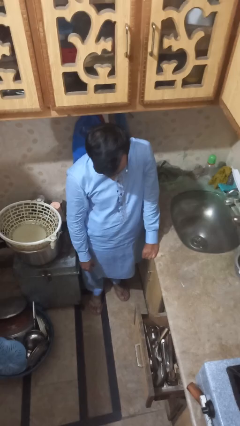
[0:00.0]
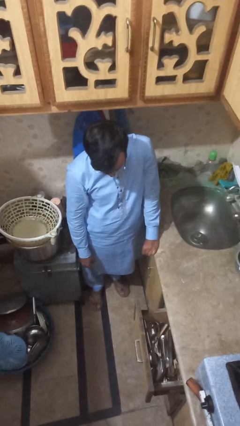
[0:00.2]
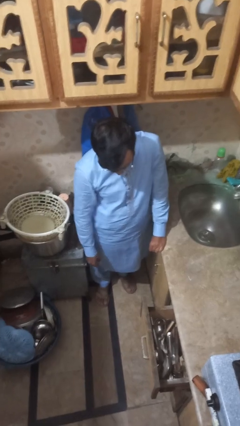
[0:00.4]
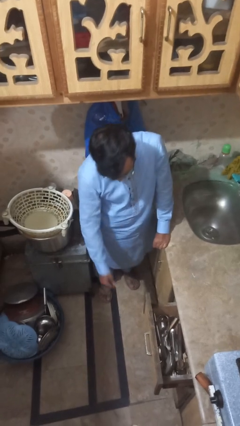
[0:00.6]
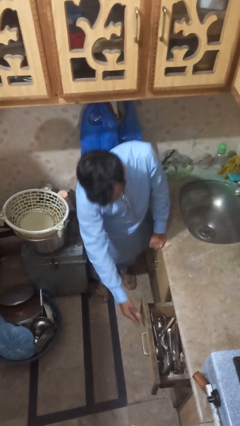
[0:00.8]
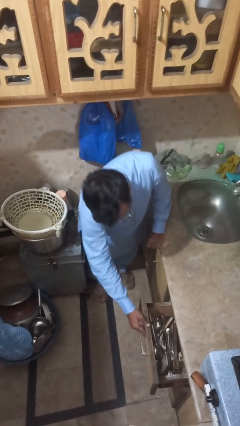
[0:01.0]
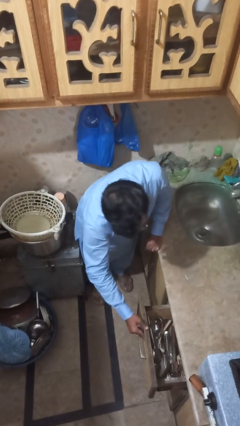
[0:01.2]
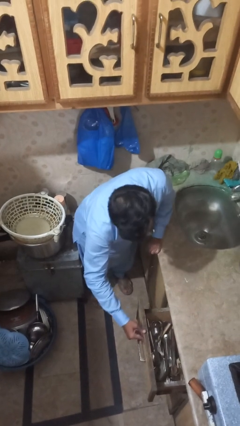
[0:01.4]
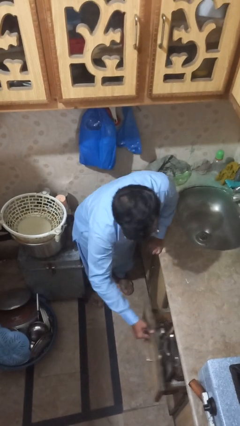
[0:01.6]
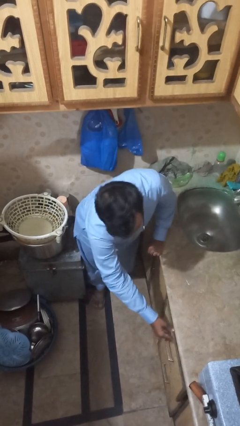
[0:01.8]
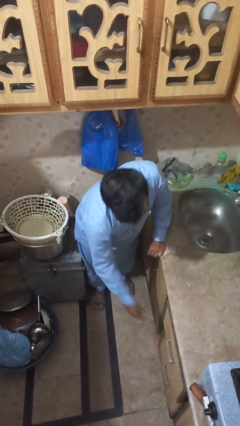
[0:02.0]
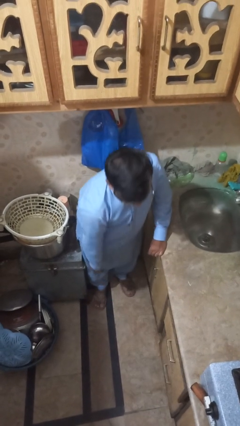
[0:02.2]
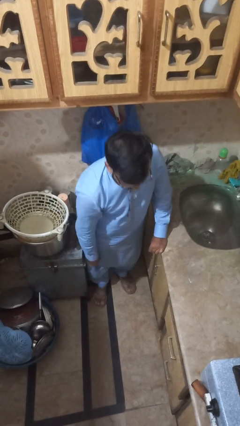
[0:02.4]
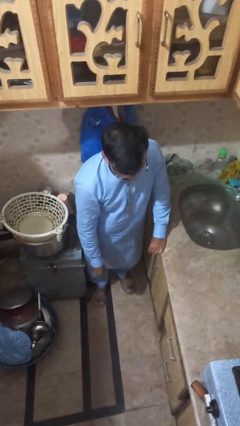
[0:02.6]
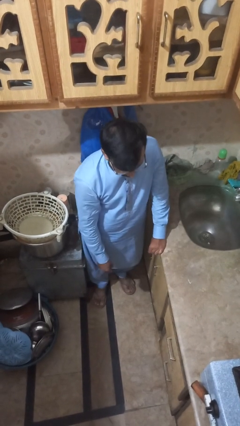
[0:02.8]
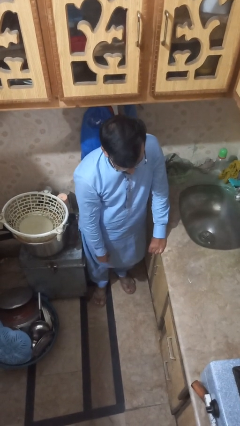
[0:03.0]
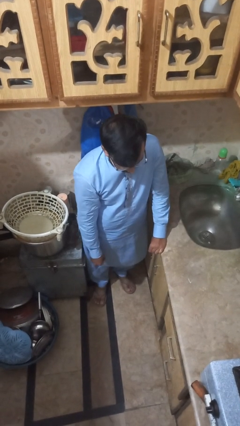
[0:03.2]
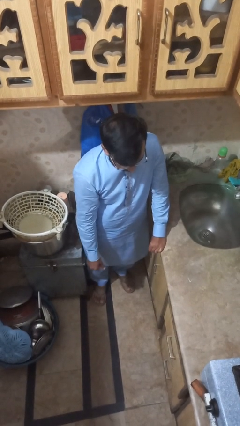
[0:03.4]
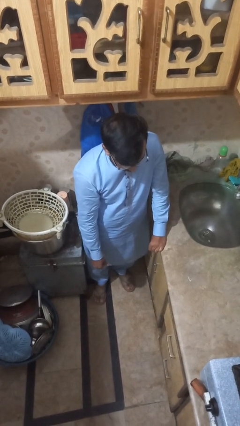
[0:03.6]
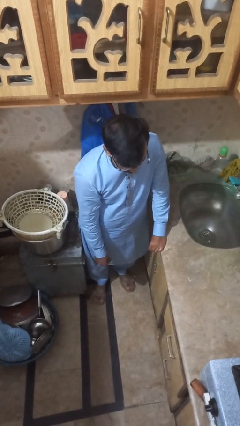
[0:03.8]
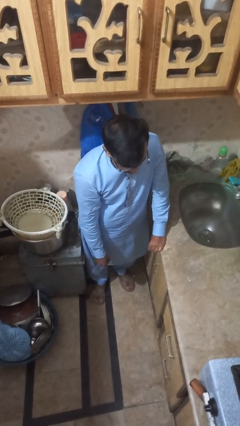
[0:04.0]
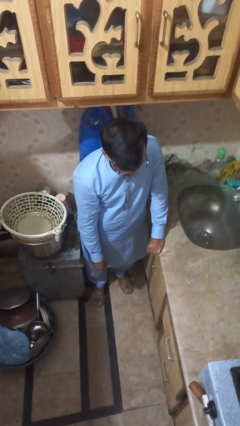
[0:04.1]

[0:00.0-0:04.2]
person closes kitchen drawer

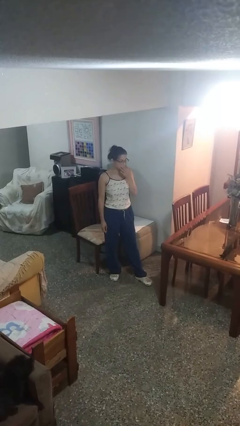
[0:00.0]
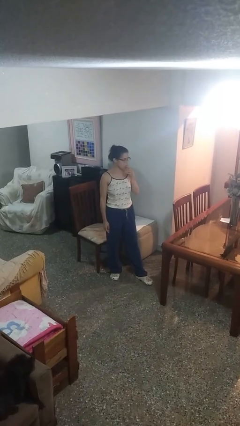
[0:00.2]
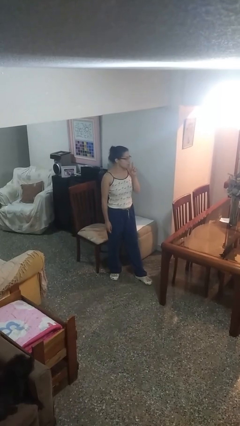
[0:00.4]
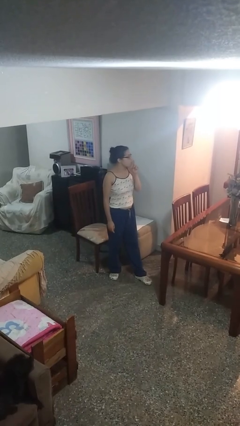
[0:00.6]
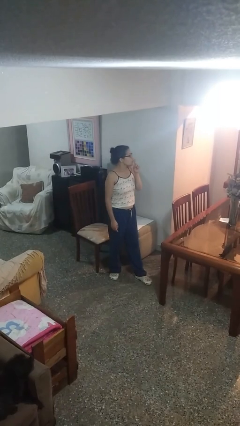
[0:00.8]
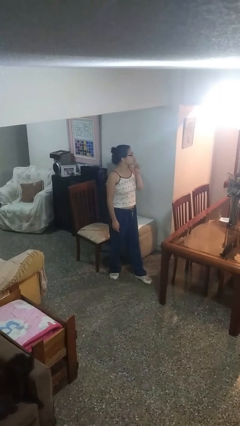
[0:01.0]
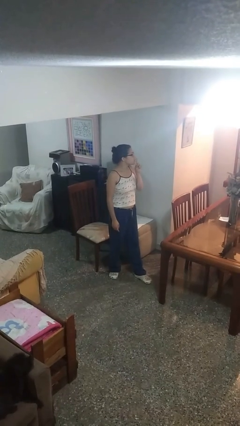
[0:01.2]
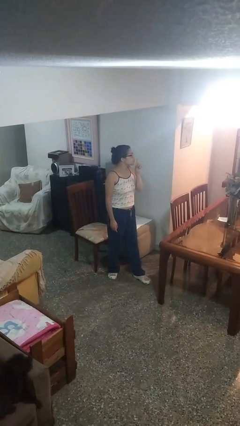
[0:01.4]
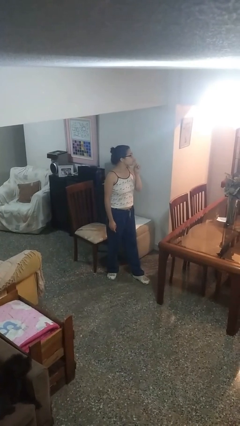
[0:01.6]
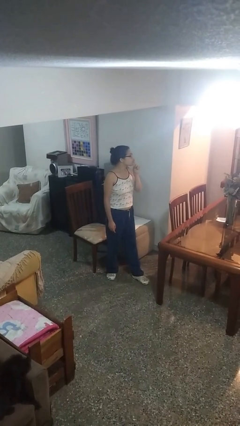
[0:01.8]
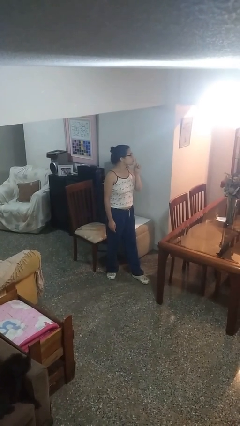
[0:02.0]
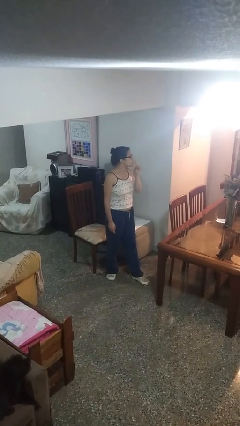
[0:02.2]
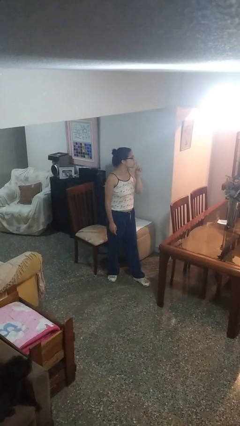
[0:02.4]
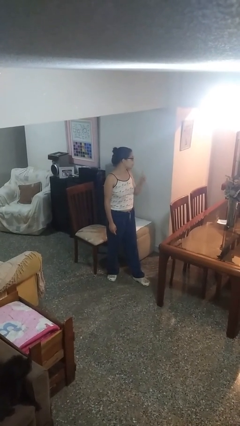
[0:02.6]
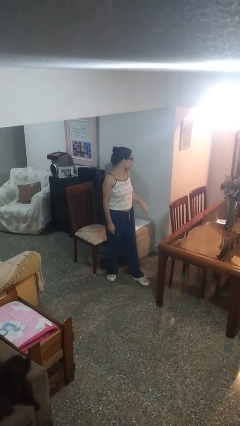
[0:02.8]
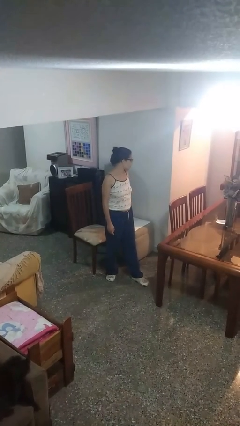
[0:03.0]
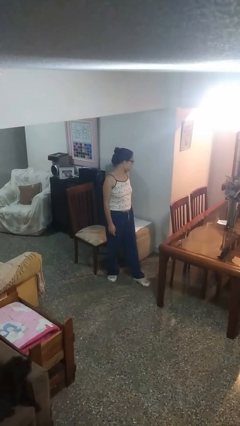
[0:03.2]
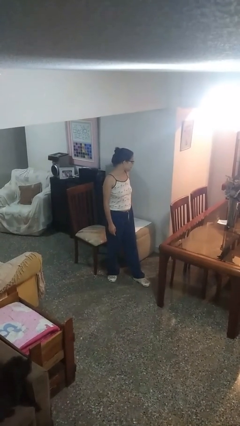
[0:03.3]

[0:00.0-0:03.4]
person gestures be quiet

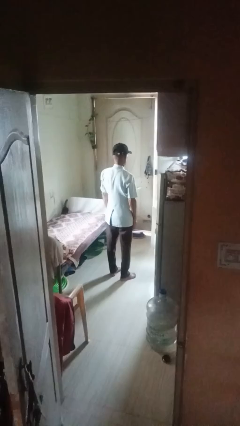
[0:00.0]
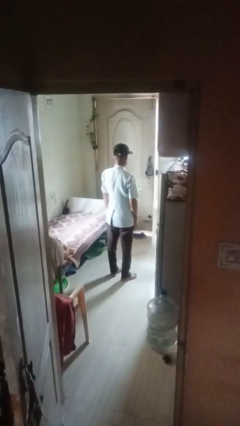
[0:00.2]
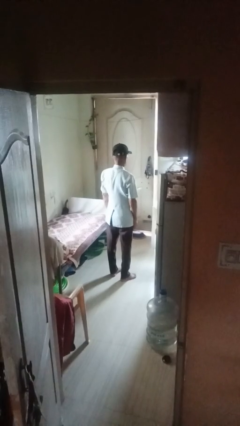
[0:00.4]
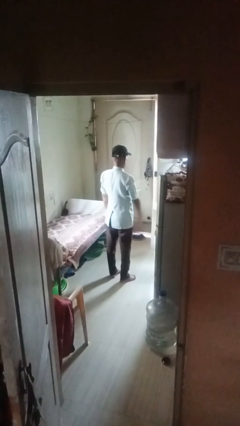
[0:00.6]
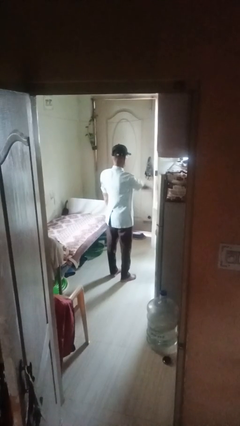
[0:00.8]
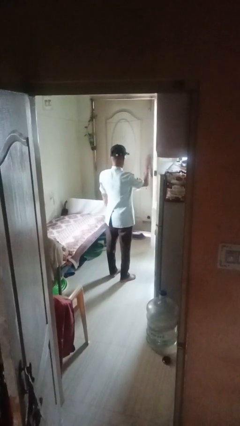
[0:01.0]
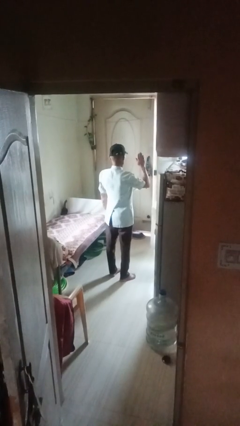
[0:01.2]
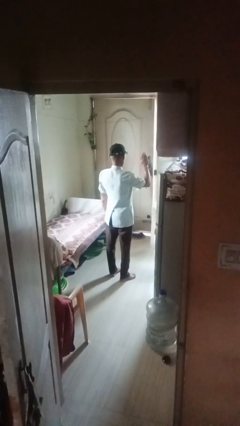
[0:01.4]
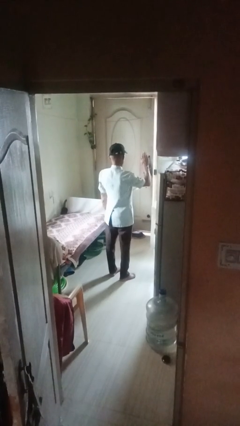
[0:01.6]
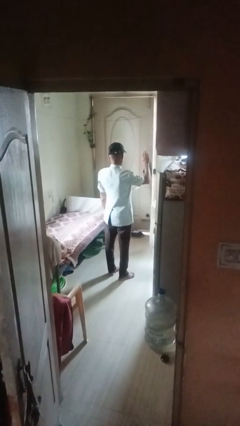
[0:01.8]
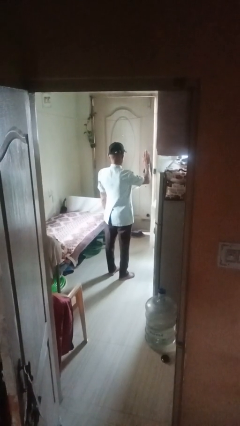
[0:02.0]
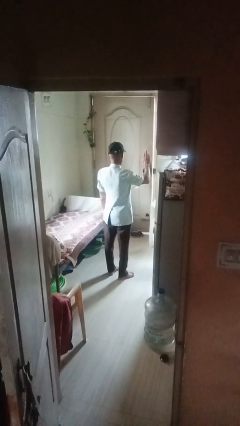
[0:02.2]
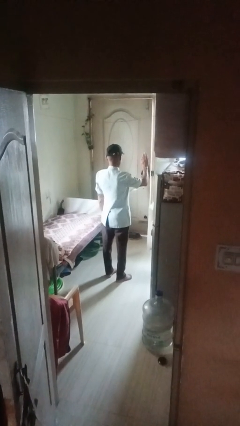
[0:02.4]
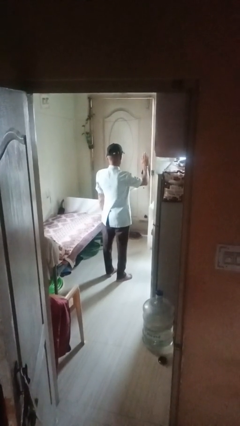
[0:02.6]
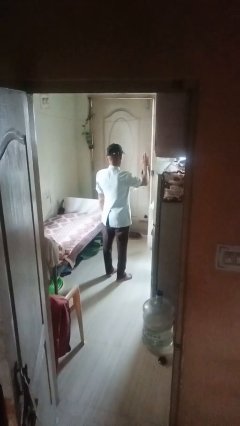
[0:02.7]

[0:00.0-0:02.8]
person gestures stop

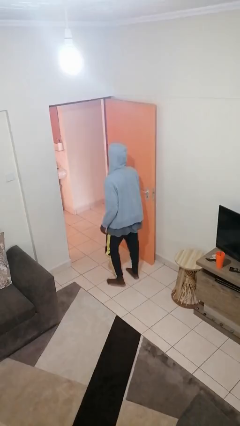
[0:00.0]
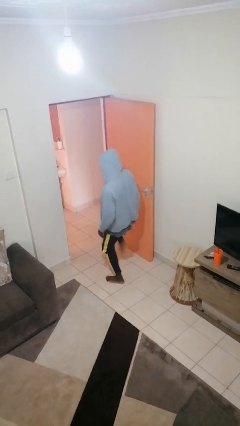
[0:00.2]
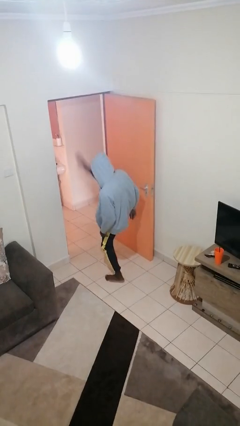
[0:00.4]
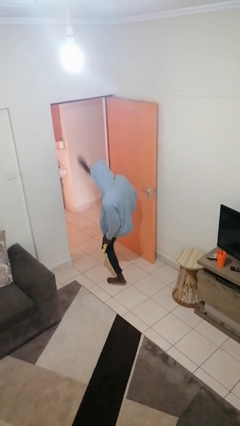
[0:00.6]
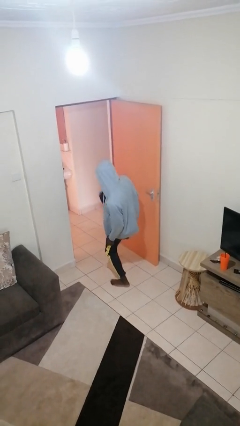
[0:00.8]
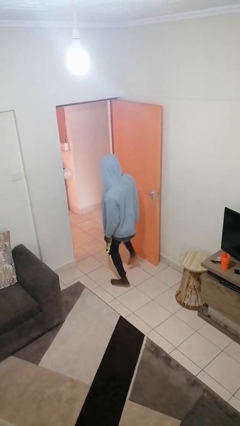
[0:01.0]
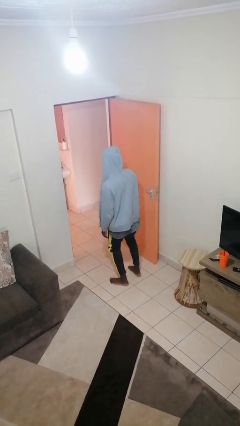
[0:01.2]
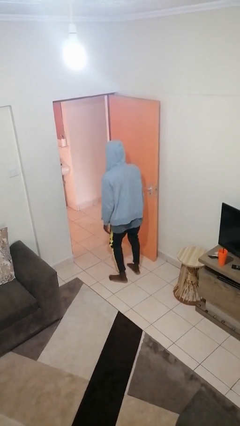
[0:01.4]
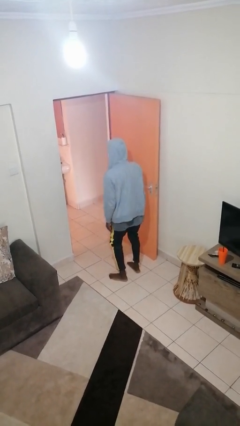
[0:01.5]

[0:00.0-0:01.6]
person karate kicks

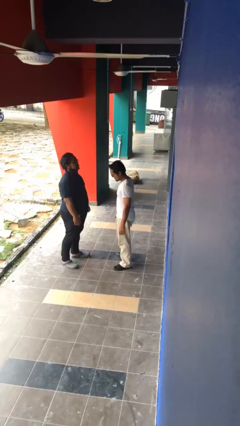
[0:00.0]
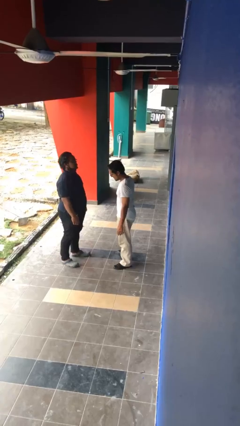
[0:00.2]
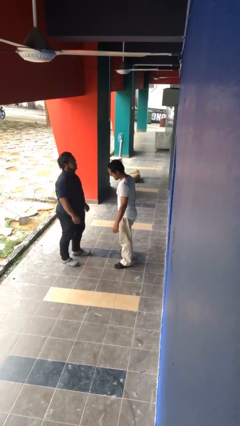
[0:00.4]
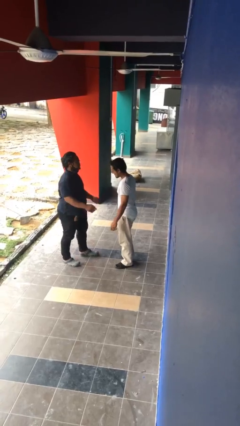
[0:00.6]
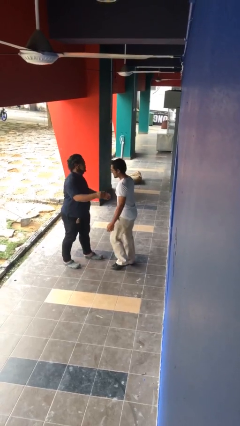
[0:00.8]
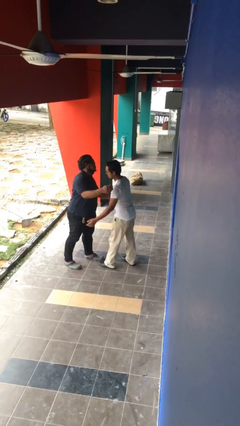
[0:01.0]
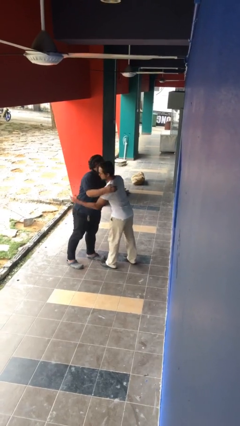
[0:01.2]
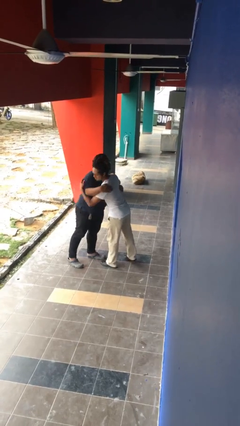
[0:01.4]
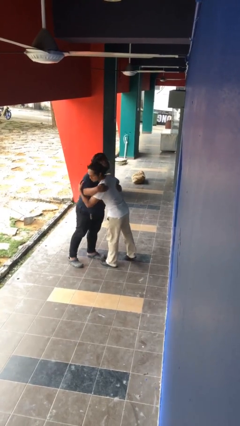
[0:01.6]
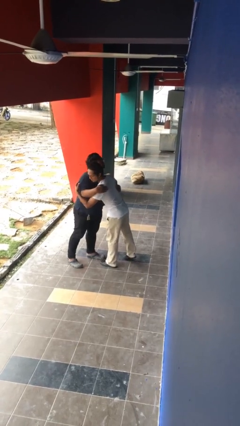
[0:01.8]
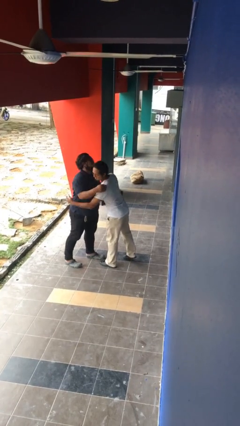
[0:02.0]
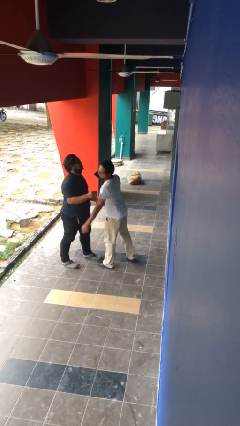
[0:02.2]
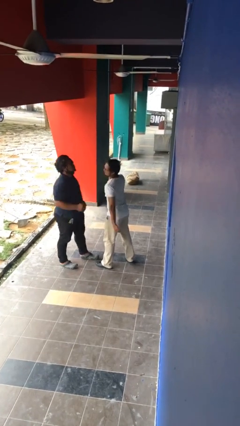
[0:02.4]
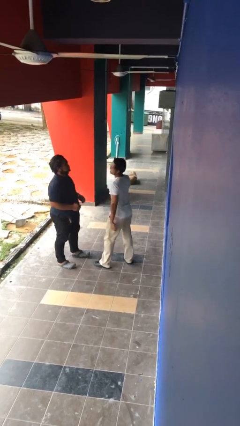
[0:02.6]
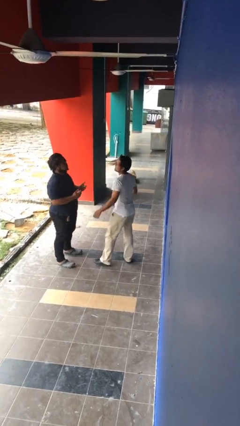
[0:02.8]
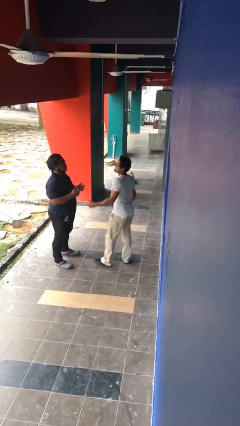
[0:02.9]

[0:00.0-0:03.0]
person embraces person

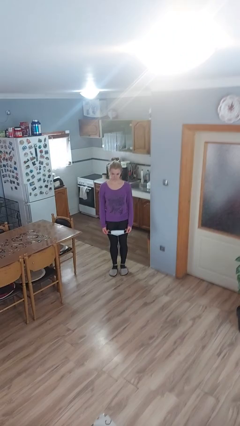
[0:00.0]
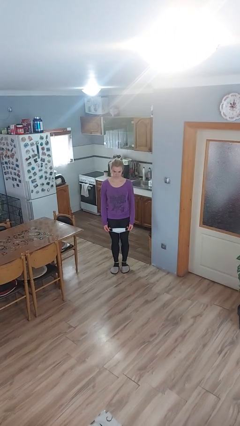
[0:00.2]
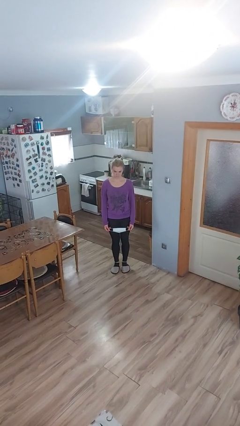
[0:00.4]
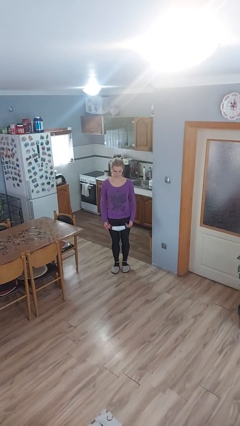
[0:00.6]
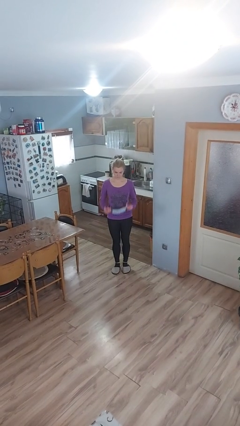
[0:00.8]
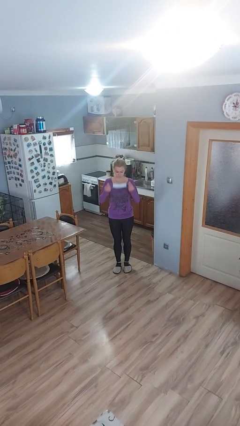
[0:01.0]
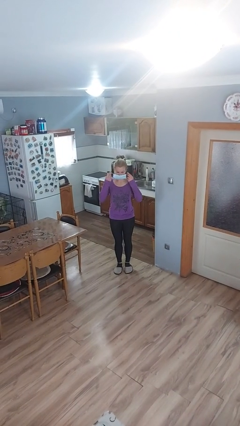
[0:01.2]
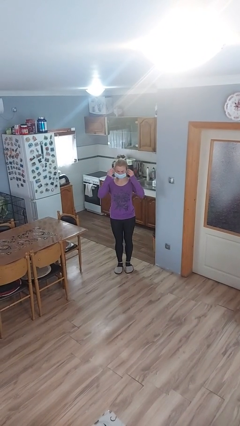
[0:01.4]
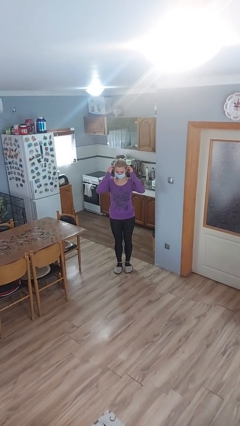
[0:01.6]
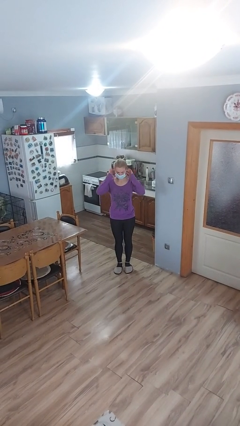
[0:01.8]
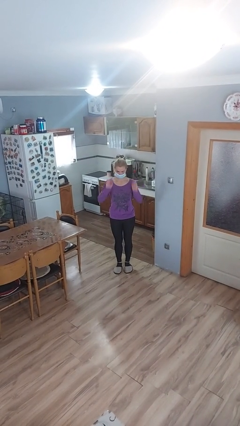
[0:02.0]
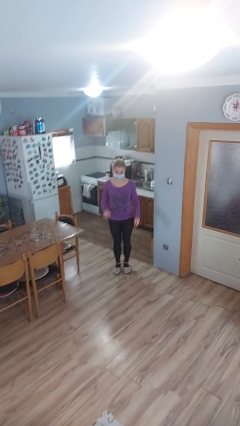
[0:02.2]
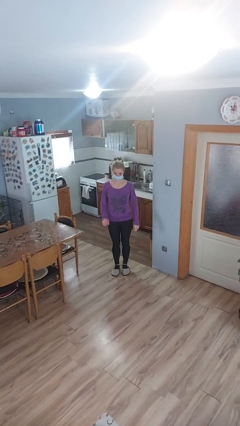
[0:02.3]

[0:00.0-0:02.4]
person puts on facemask
